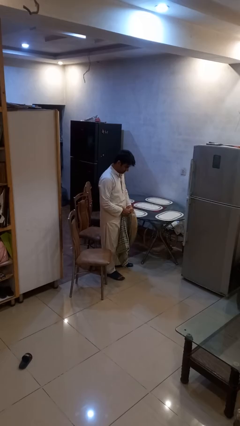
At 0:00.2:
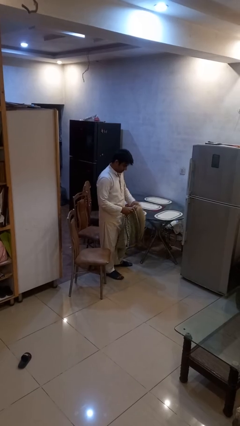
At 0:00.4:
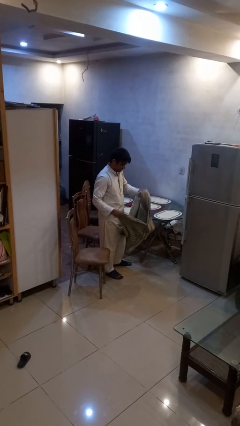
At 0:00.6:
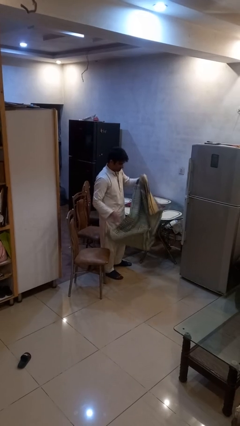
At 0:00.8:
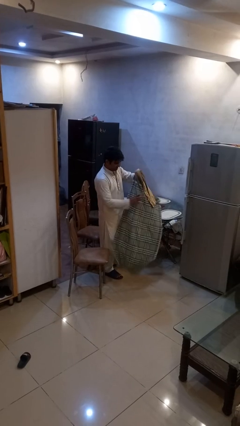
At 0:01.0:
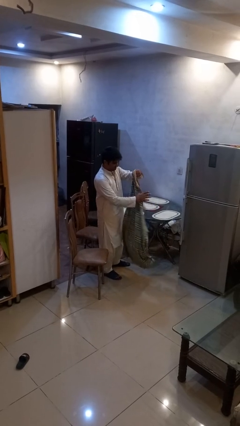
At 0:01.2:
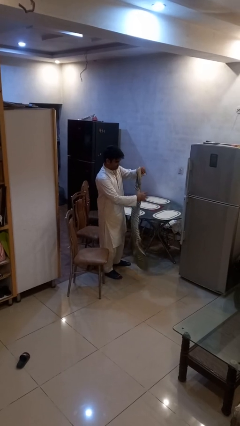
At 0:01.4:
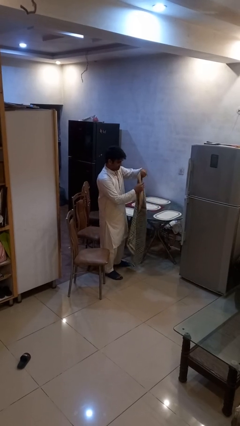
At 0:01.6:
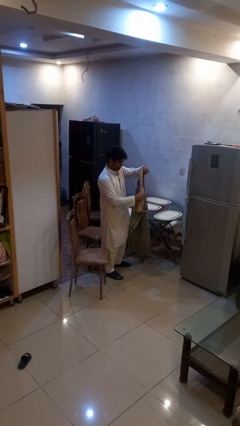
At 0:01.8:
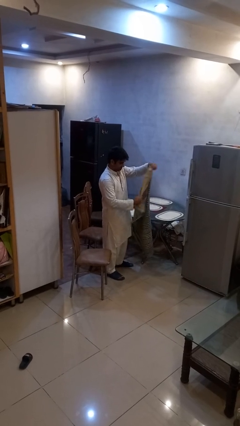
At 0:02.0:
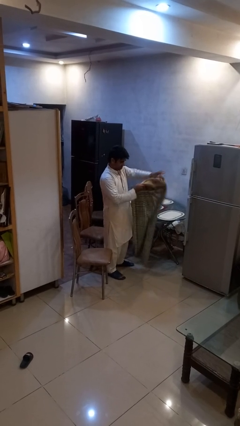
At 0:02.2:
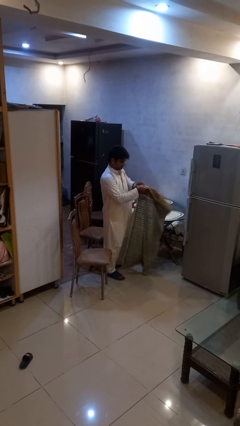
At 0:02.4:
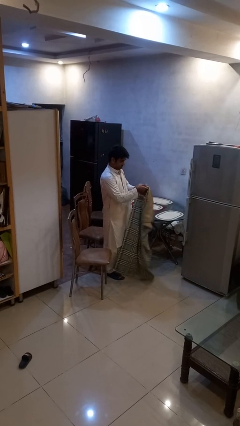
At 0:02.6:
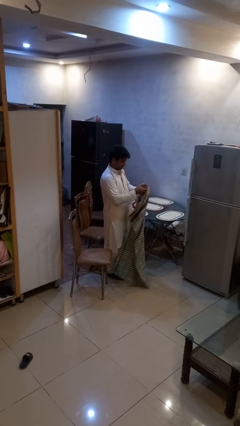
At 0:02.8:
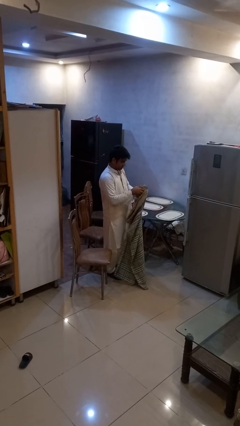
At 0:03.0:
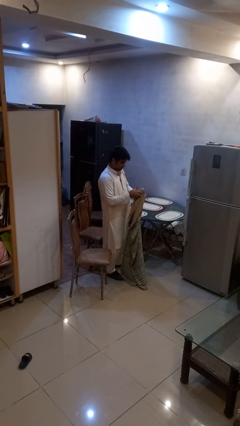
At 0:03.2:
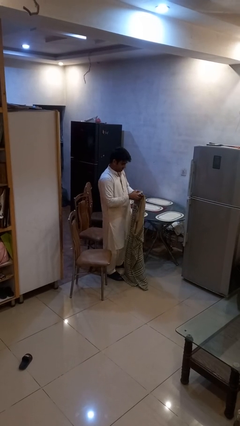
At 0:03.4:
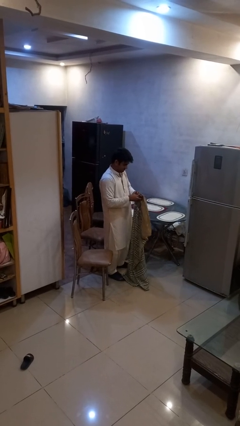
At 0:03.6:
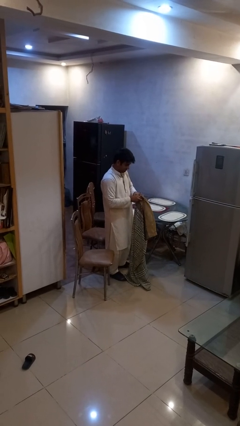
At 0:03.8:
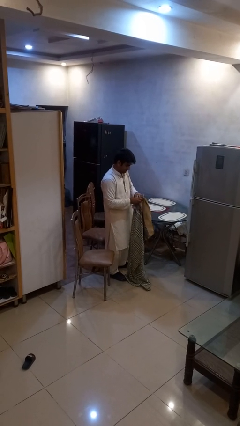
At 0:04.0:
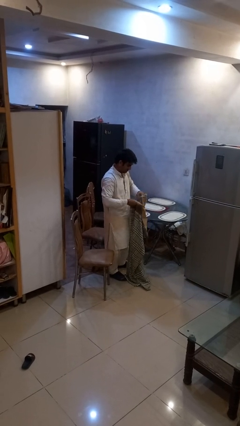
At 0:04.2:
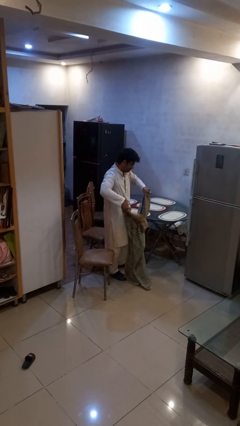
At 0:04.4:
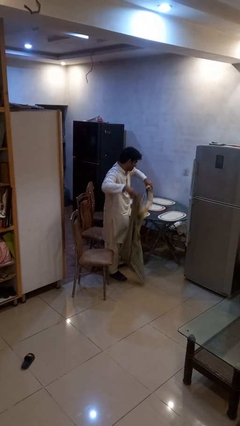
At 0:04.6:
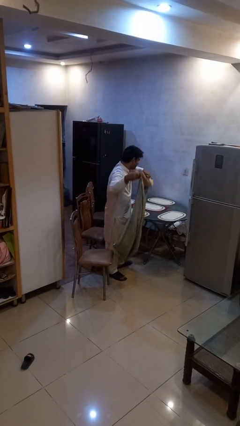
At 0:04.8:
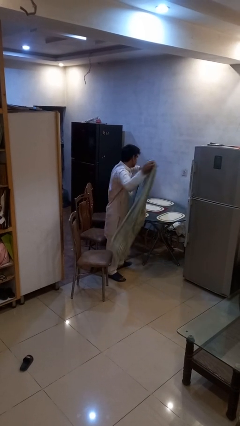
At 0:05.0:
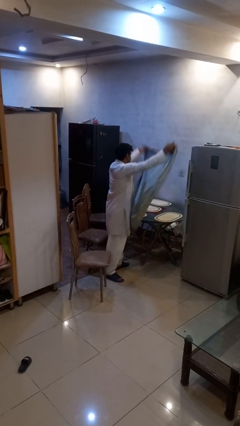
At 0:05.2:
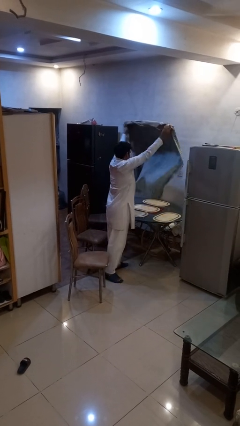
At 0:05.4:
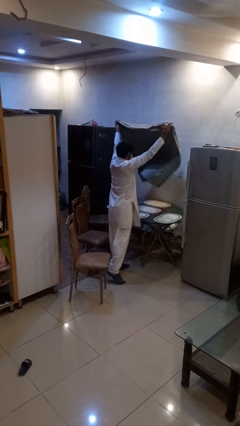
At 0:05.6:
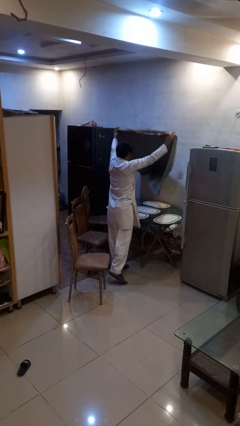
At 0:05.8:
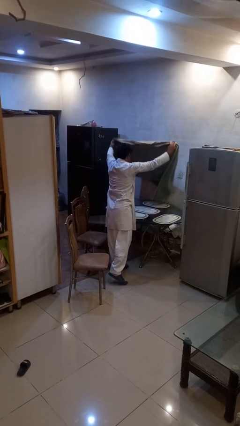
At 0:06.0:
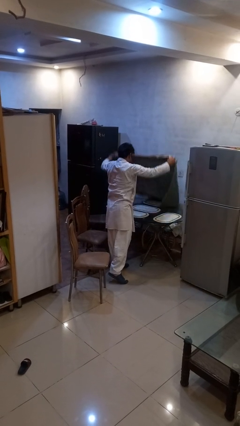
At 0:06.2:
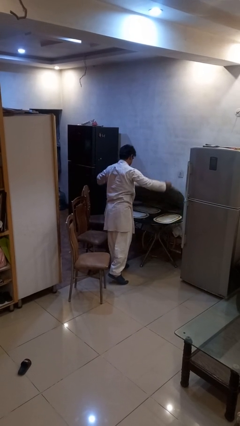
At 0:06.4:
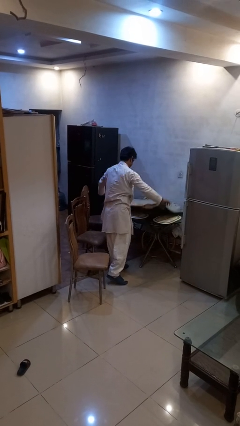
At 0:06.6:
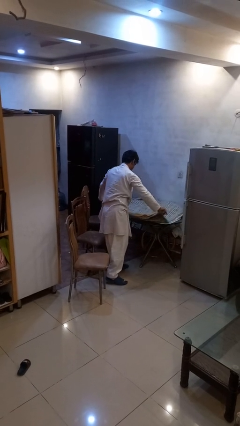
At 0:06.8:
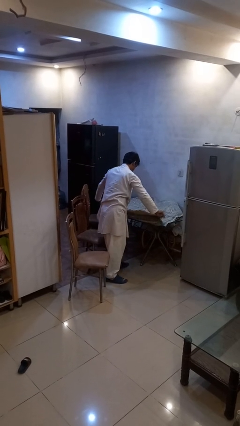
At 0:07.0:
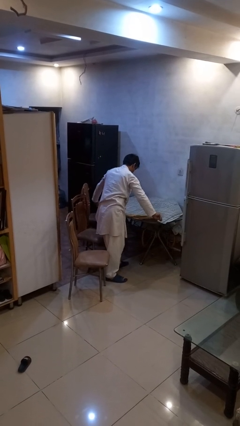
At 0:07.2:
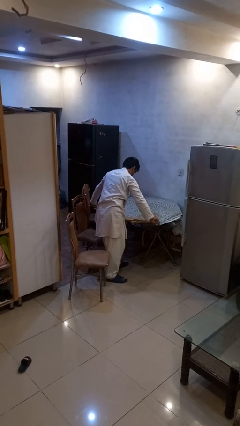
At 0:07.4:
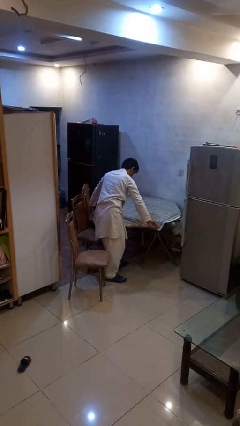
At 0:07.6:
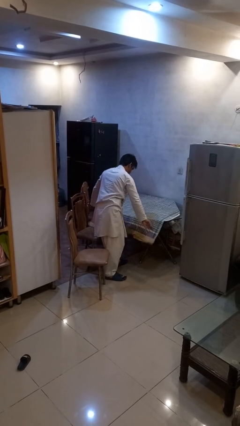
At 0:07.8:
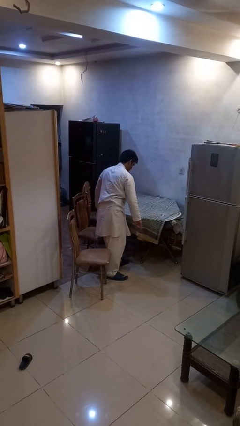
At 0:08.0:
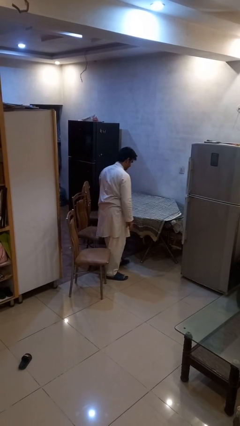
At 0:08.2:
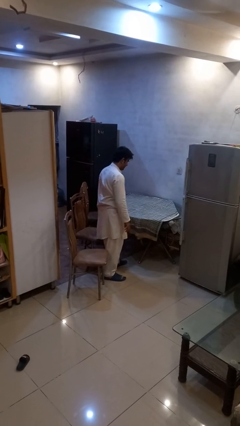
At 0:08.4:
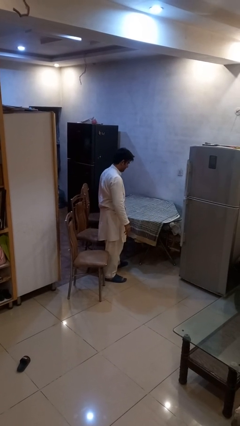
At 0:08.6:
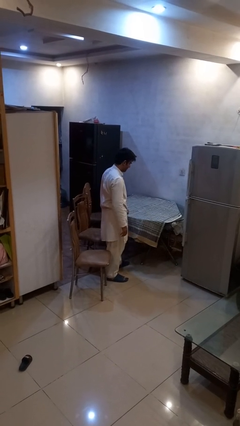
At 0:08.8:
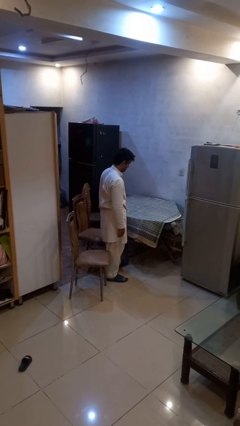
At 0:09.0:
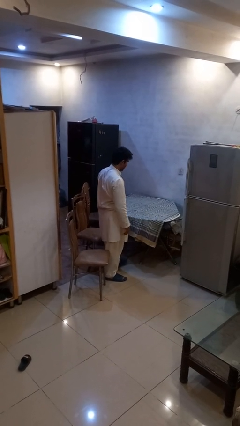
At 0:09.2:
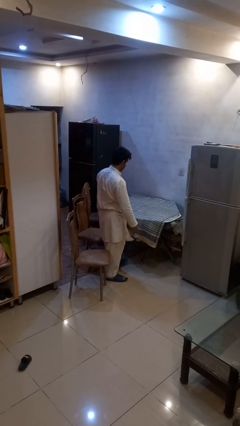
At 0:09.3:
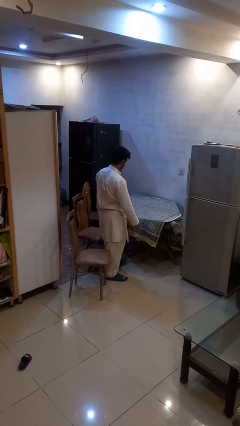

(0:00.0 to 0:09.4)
person spreads tablecloth

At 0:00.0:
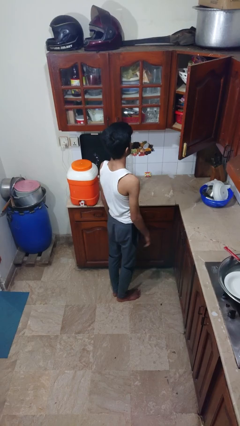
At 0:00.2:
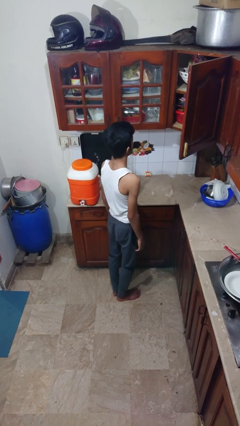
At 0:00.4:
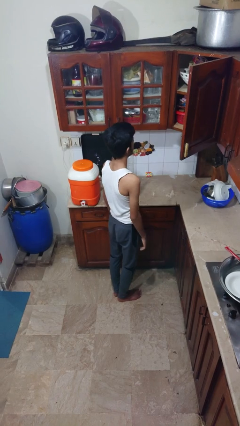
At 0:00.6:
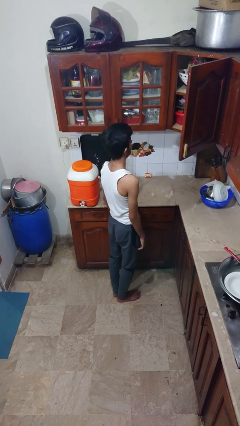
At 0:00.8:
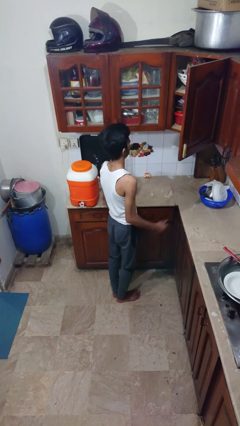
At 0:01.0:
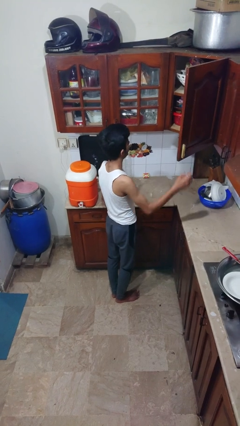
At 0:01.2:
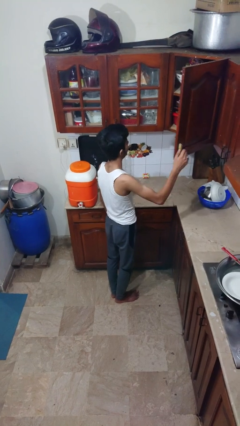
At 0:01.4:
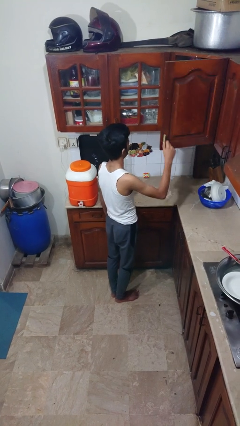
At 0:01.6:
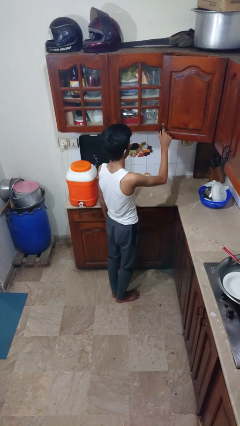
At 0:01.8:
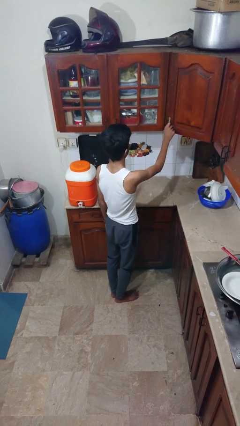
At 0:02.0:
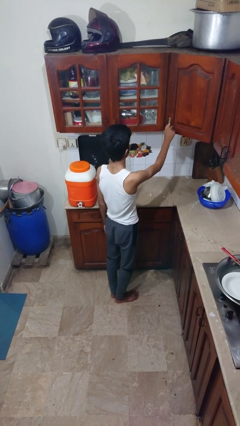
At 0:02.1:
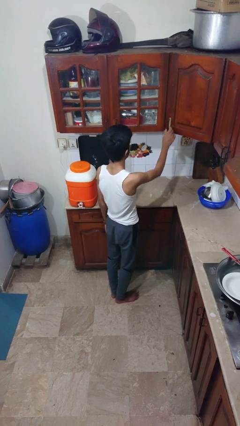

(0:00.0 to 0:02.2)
person closes cabinet

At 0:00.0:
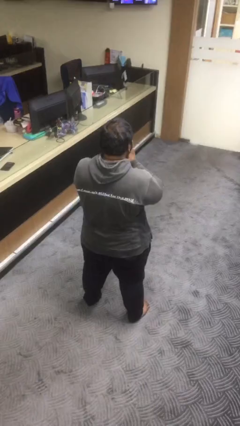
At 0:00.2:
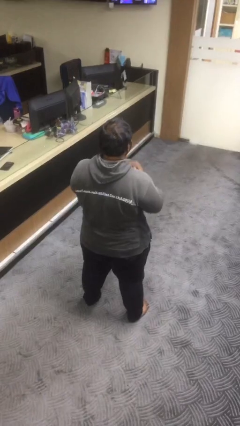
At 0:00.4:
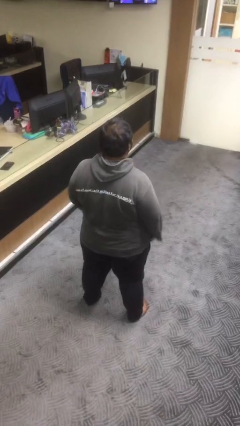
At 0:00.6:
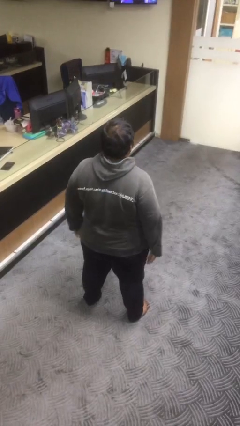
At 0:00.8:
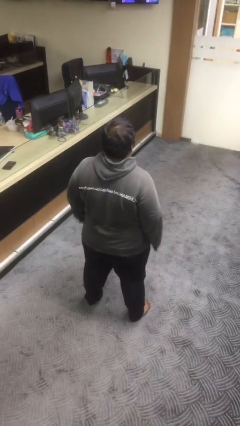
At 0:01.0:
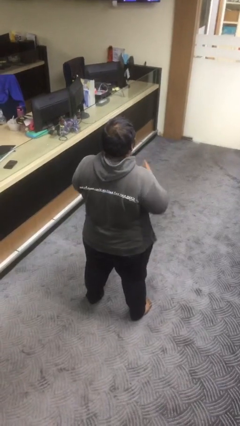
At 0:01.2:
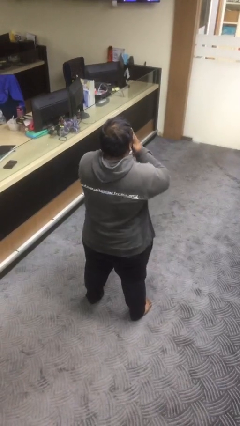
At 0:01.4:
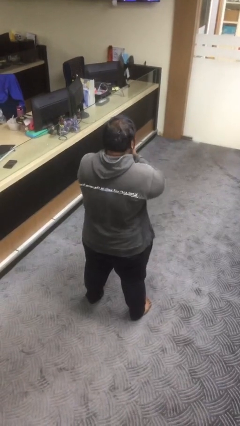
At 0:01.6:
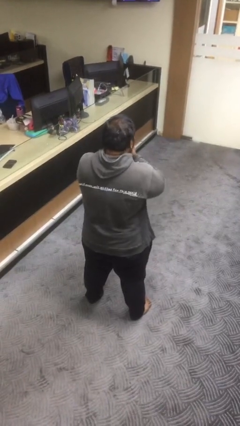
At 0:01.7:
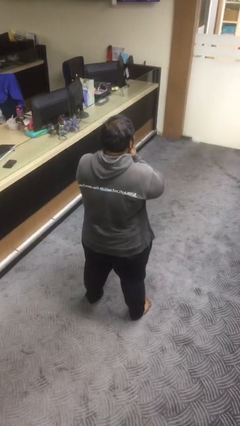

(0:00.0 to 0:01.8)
person sneezes into hand

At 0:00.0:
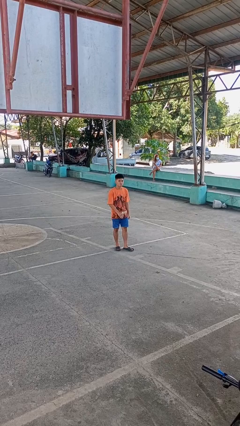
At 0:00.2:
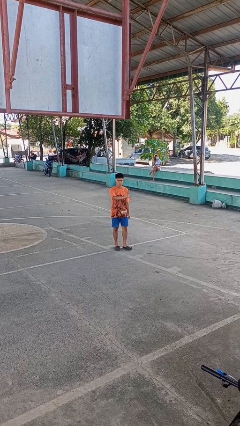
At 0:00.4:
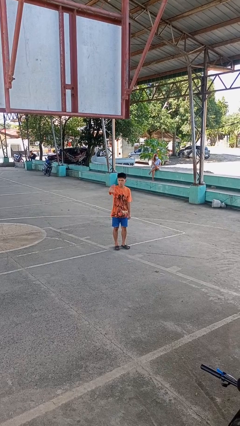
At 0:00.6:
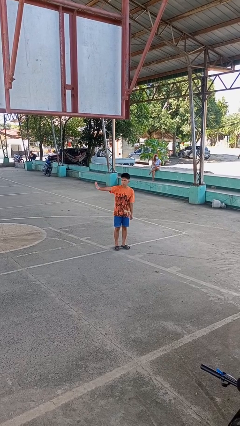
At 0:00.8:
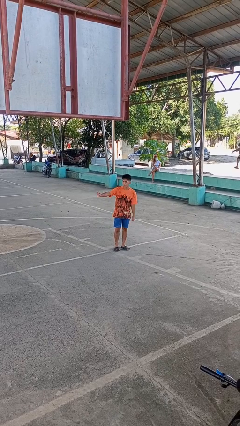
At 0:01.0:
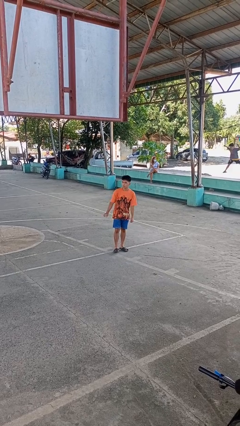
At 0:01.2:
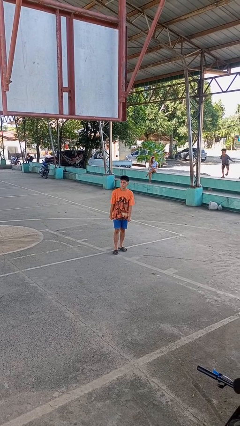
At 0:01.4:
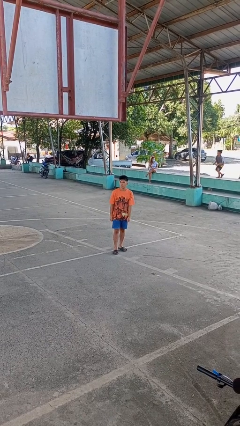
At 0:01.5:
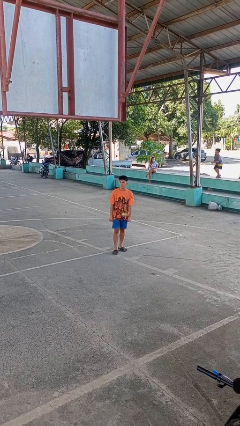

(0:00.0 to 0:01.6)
person gestures swipe right

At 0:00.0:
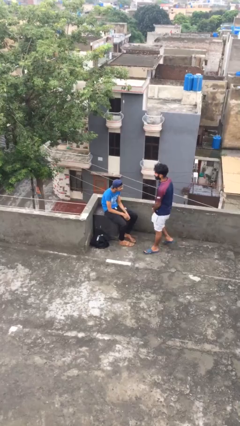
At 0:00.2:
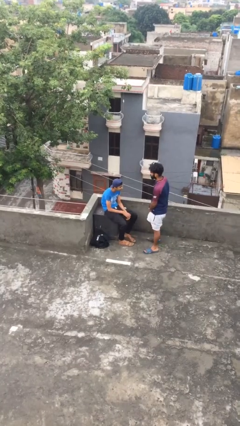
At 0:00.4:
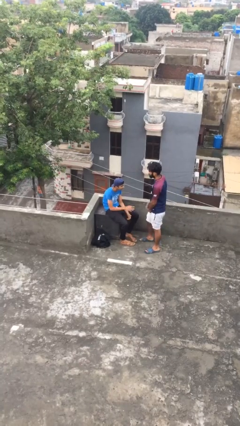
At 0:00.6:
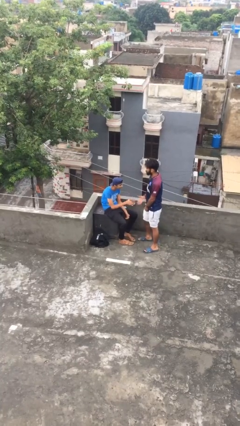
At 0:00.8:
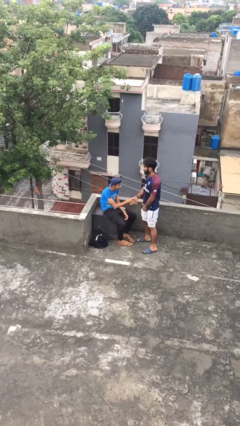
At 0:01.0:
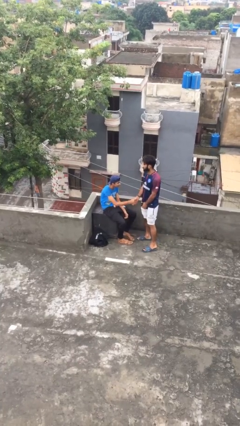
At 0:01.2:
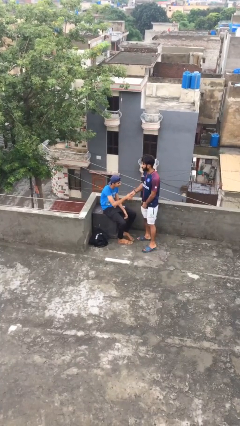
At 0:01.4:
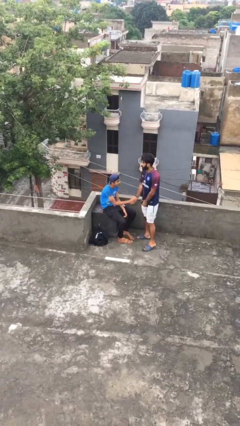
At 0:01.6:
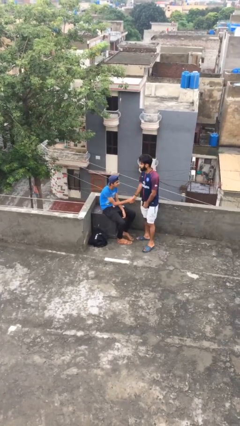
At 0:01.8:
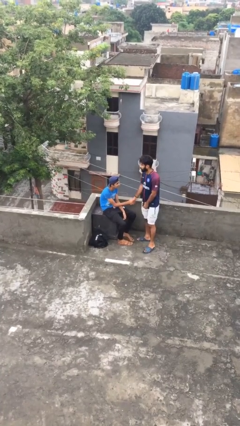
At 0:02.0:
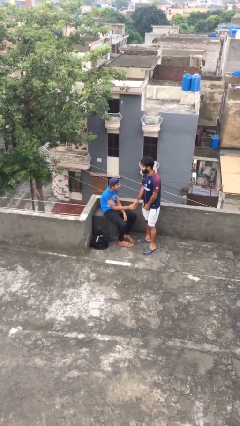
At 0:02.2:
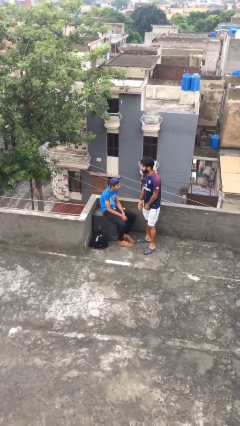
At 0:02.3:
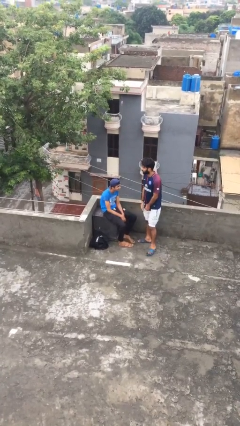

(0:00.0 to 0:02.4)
person shakes hand

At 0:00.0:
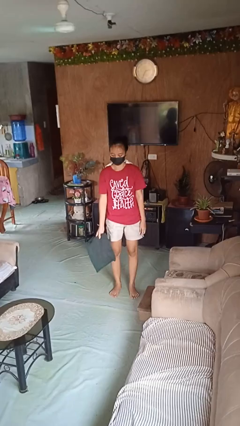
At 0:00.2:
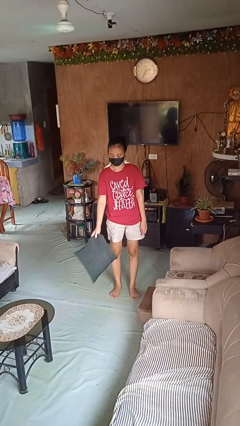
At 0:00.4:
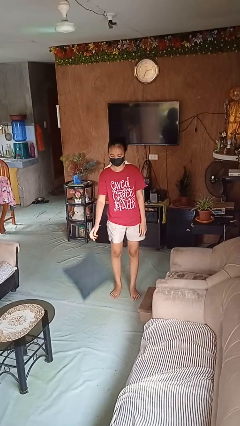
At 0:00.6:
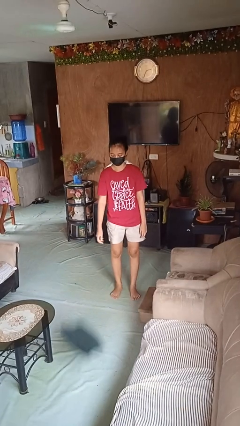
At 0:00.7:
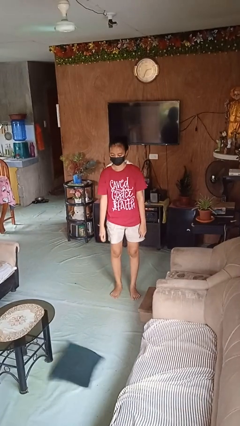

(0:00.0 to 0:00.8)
person throws object to ground
